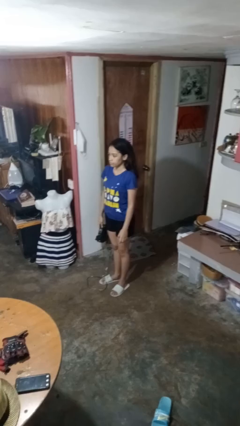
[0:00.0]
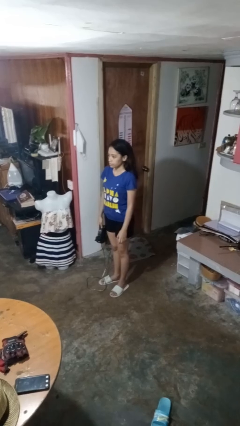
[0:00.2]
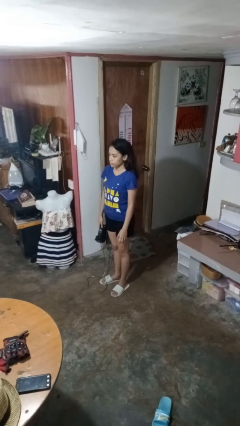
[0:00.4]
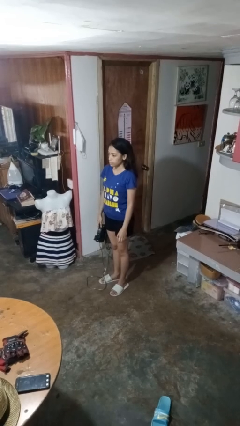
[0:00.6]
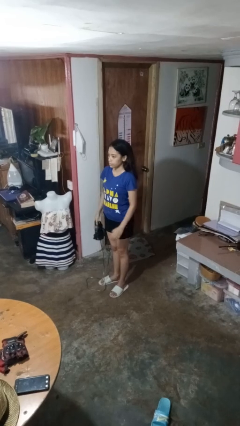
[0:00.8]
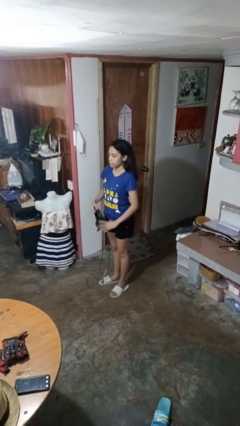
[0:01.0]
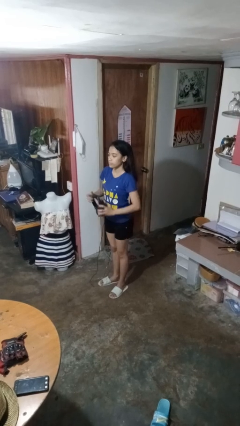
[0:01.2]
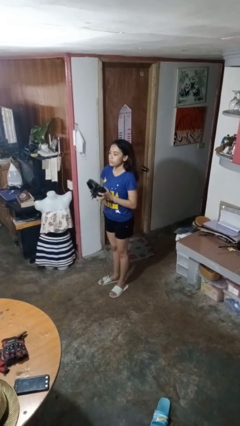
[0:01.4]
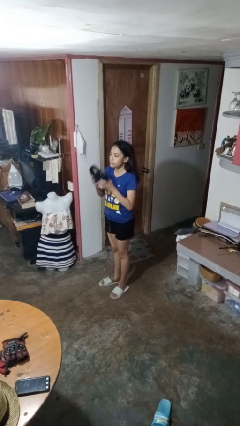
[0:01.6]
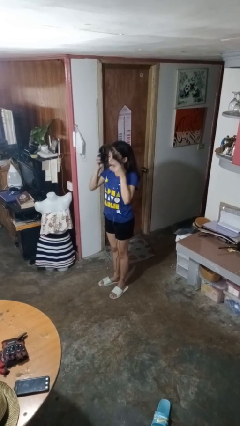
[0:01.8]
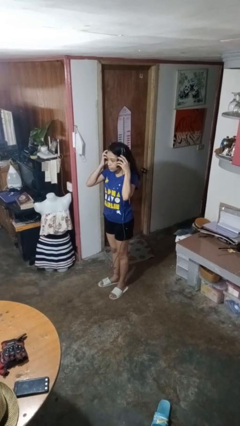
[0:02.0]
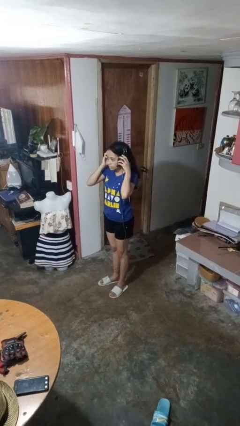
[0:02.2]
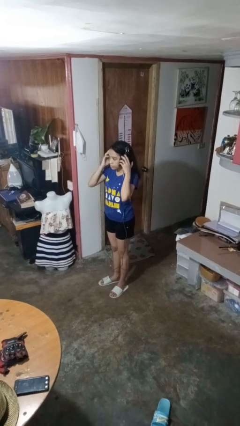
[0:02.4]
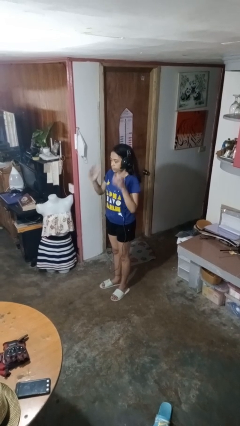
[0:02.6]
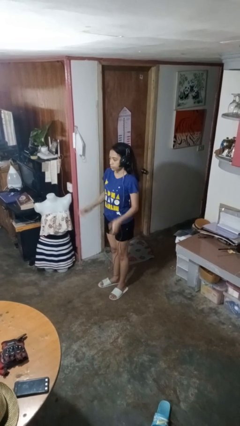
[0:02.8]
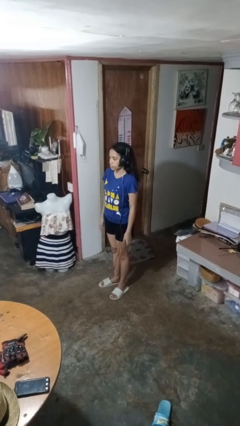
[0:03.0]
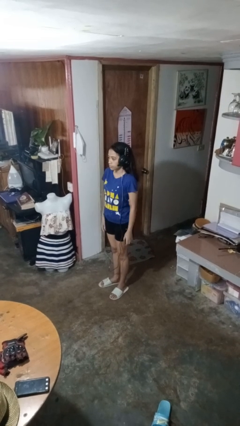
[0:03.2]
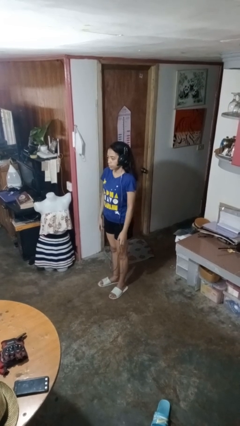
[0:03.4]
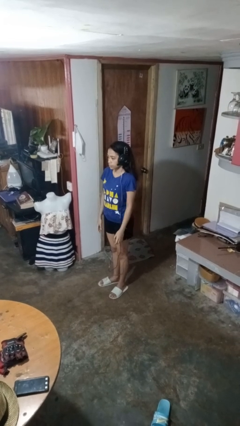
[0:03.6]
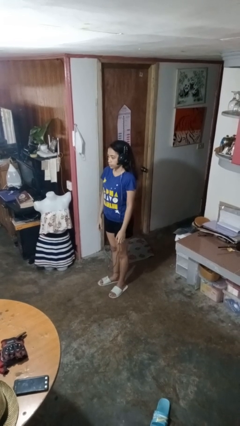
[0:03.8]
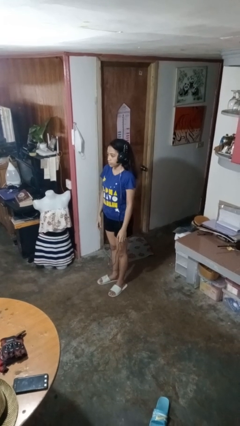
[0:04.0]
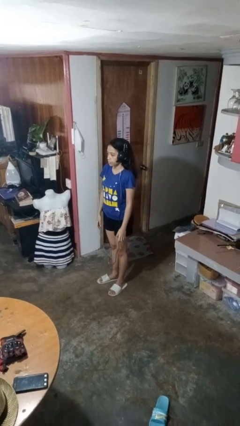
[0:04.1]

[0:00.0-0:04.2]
person puts on headphones

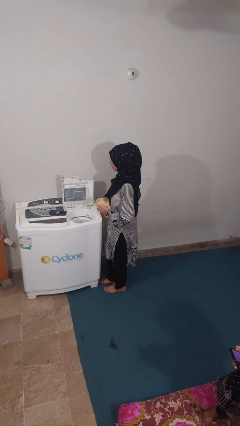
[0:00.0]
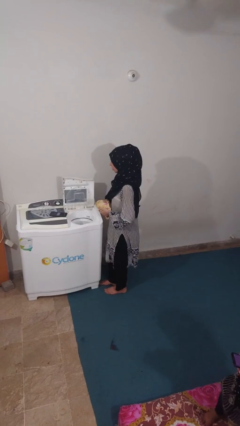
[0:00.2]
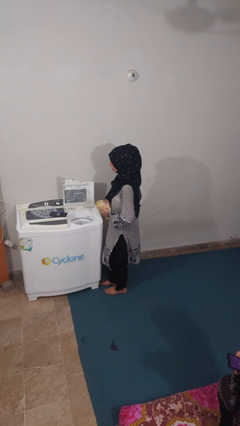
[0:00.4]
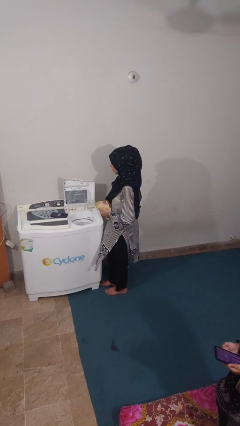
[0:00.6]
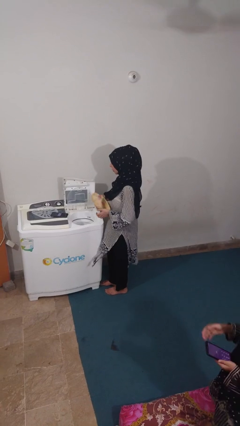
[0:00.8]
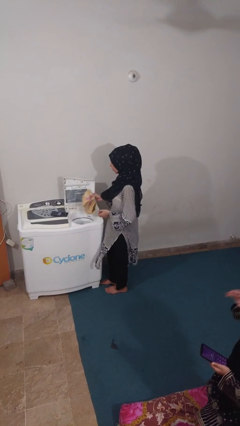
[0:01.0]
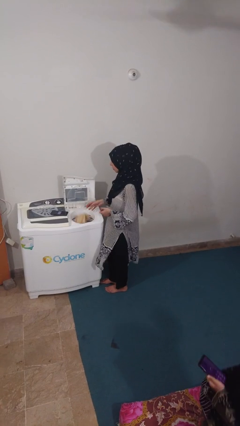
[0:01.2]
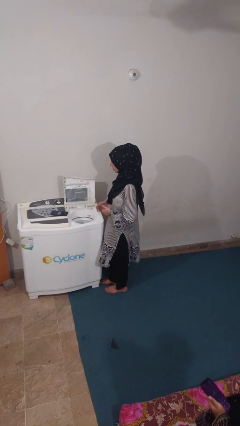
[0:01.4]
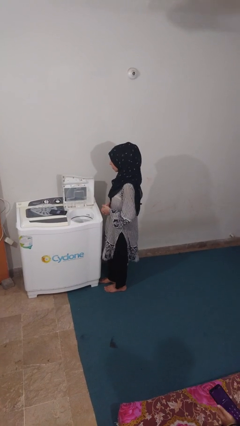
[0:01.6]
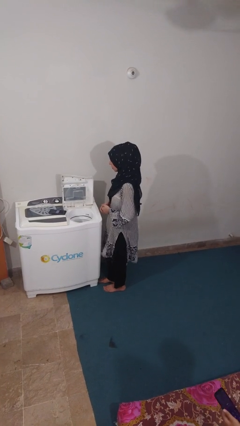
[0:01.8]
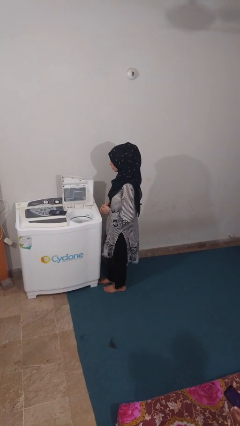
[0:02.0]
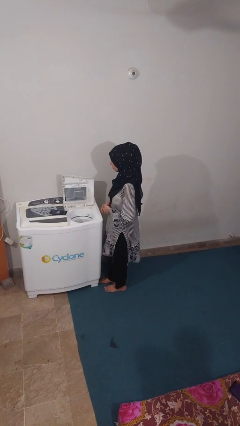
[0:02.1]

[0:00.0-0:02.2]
person loads dryer

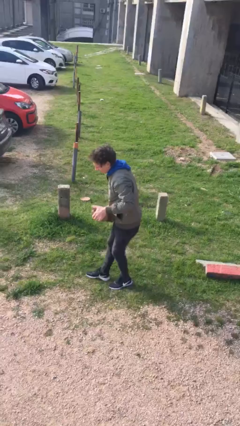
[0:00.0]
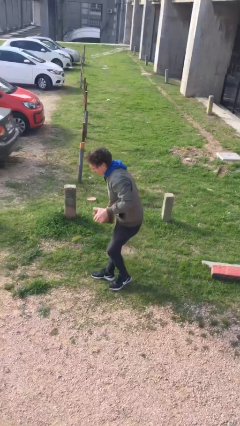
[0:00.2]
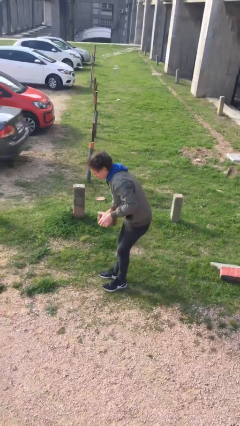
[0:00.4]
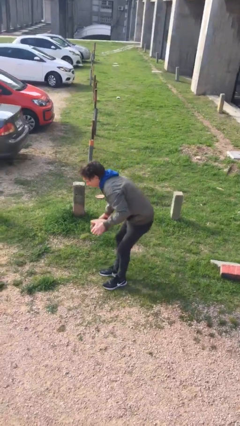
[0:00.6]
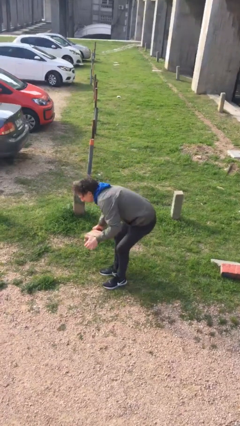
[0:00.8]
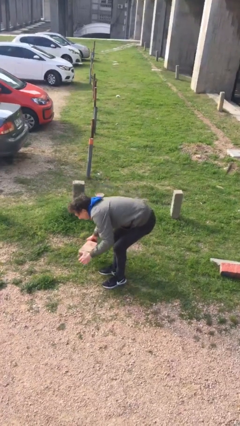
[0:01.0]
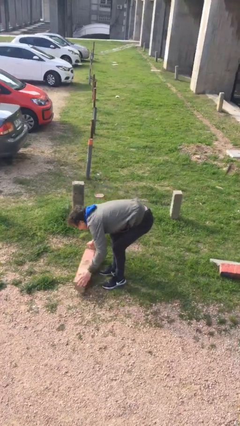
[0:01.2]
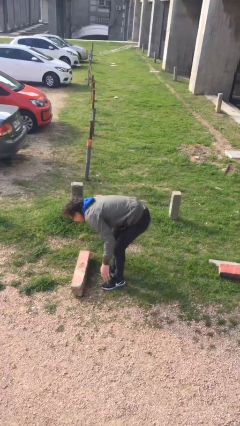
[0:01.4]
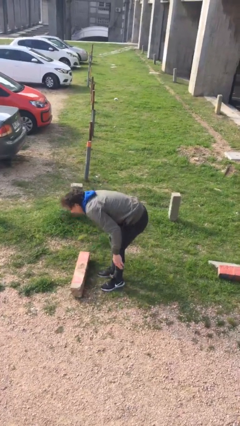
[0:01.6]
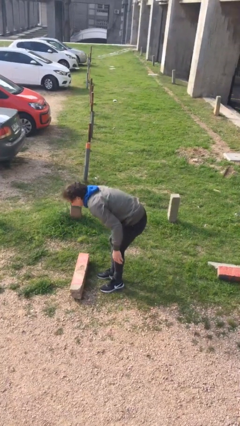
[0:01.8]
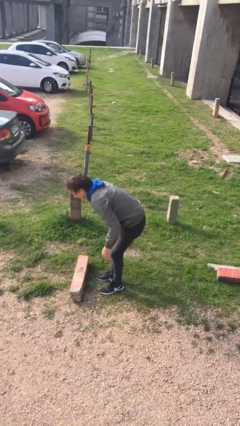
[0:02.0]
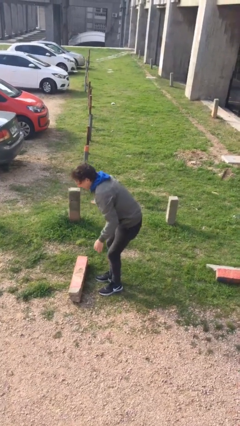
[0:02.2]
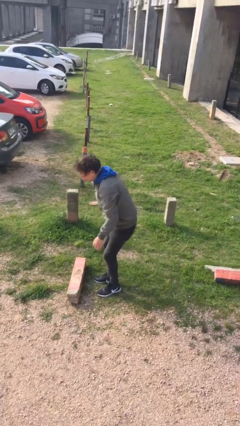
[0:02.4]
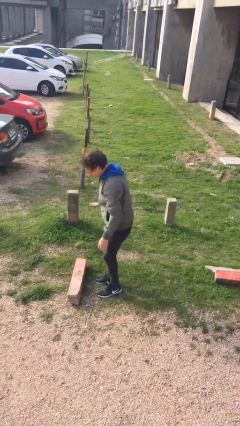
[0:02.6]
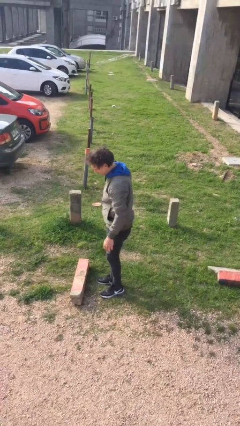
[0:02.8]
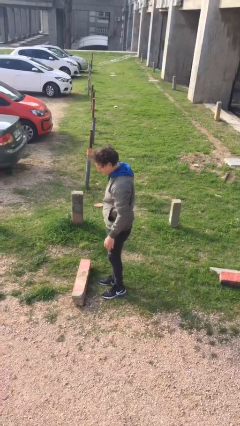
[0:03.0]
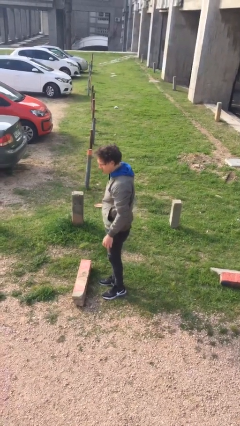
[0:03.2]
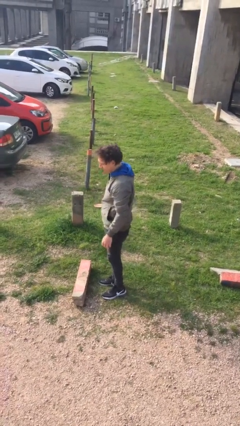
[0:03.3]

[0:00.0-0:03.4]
person puts down object on floor

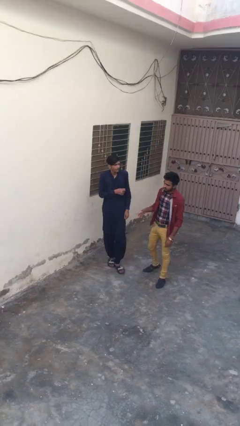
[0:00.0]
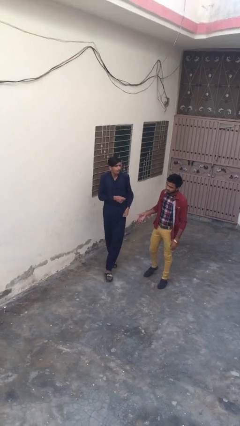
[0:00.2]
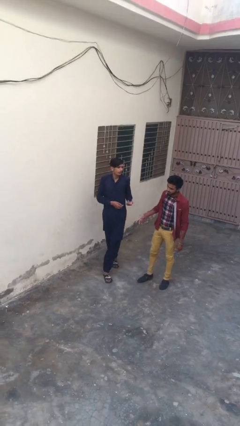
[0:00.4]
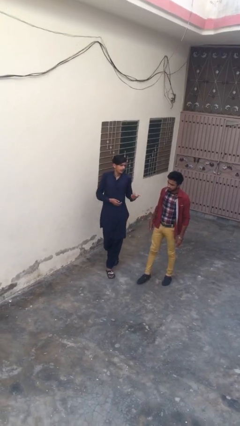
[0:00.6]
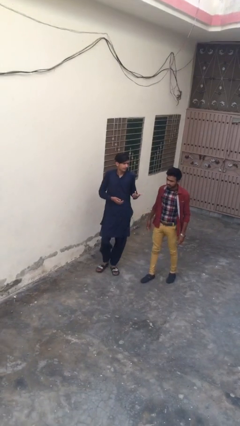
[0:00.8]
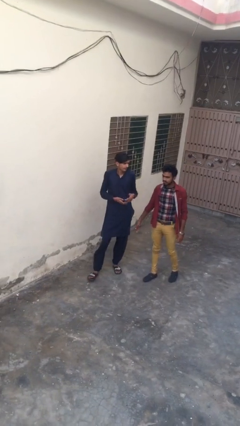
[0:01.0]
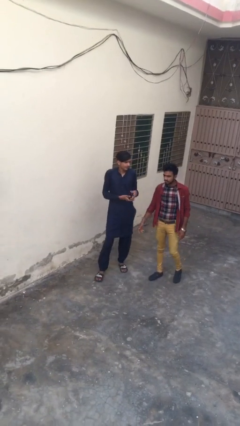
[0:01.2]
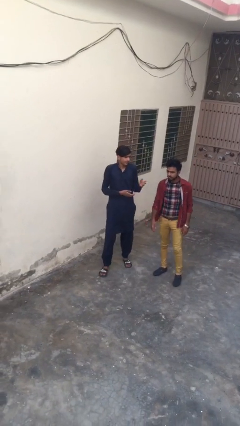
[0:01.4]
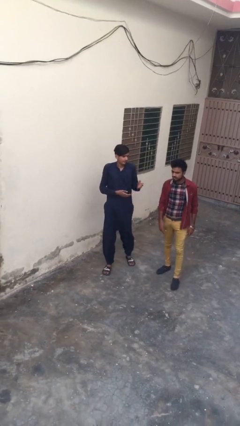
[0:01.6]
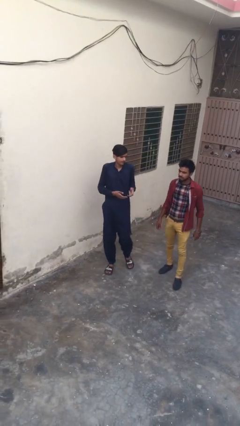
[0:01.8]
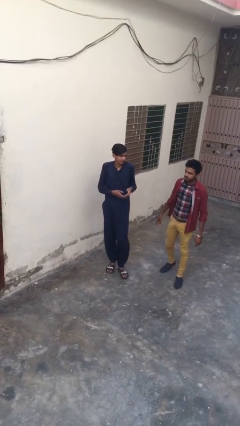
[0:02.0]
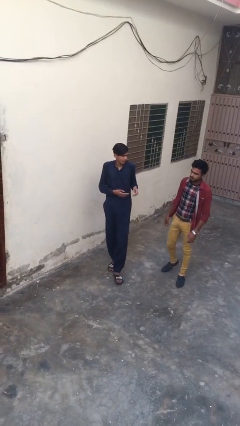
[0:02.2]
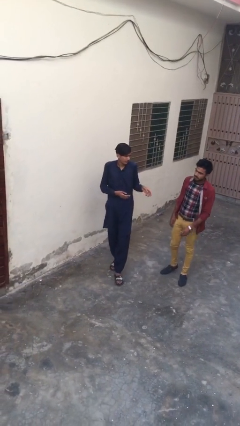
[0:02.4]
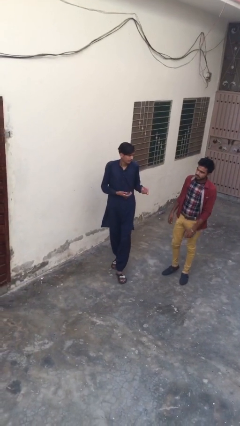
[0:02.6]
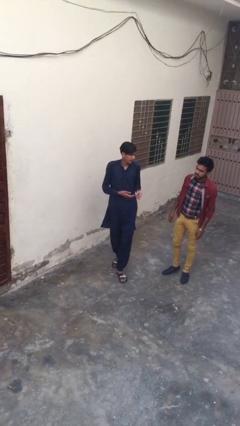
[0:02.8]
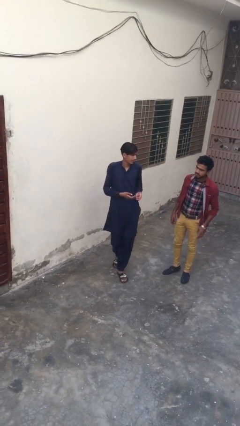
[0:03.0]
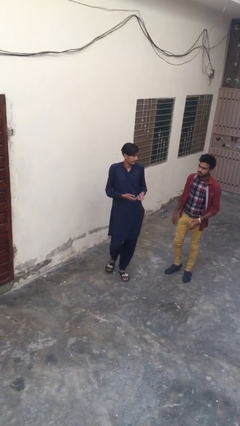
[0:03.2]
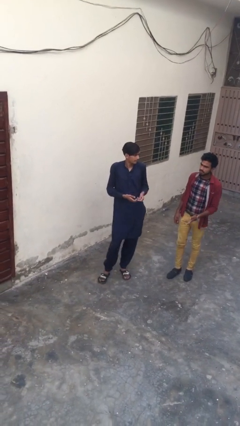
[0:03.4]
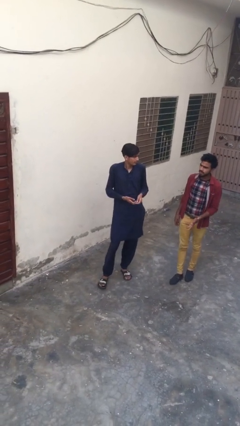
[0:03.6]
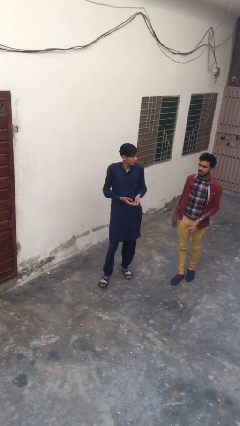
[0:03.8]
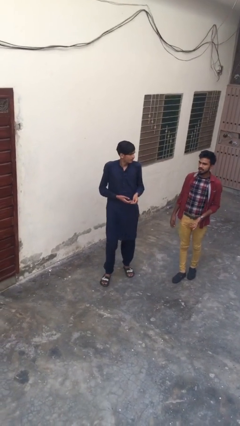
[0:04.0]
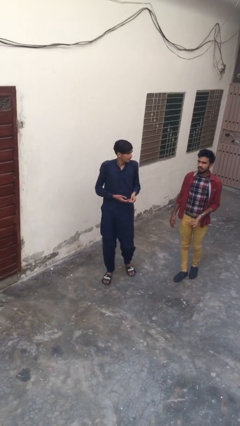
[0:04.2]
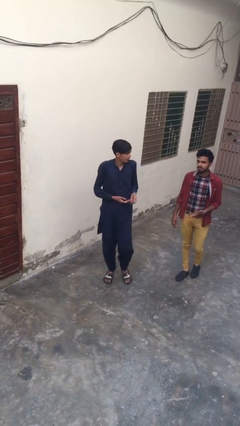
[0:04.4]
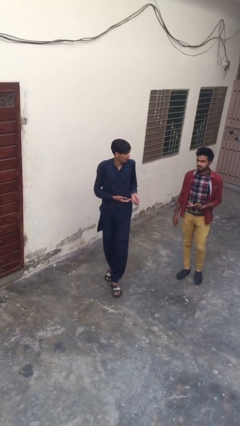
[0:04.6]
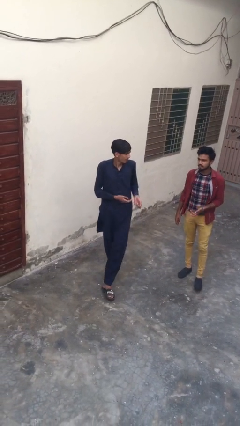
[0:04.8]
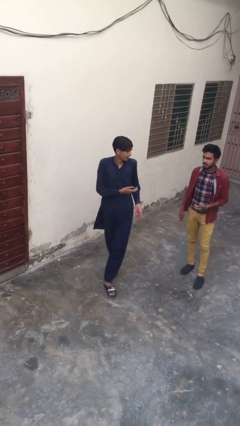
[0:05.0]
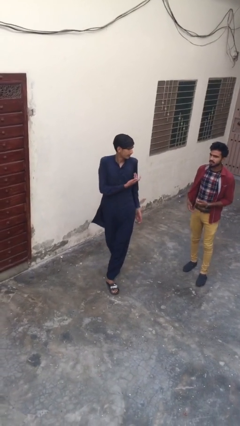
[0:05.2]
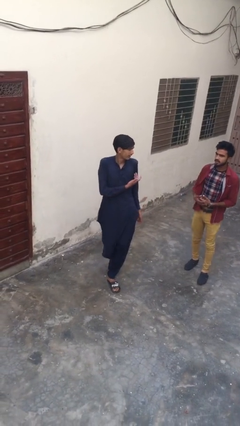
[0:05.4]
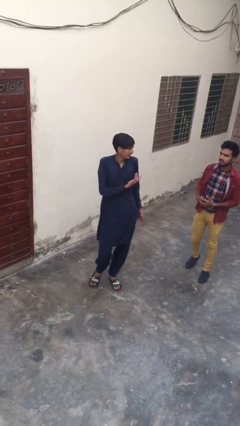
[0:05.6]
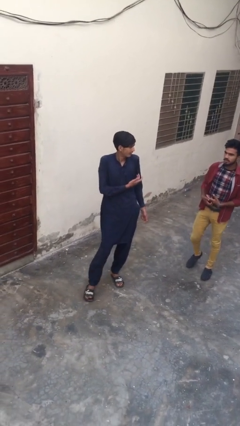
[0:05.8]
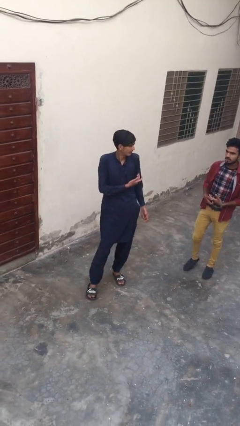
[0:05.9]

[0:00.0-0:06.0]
person talks to person

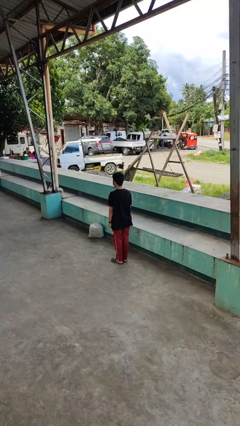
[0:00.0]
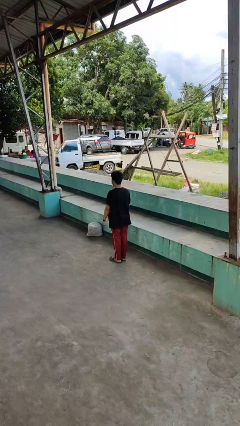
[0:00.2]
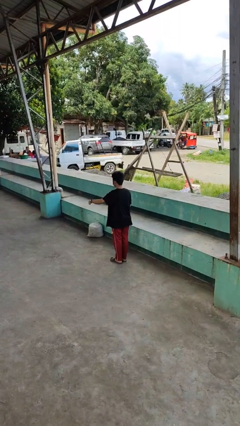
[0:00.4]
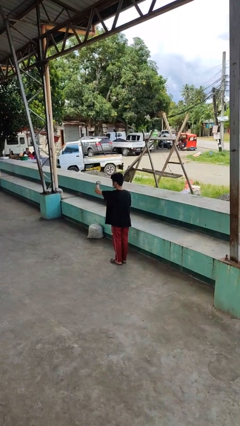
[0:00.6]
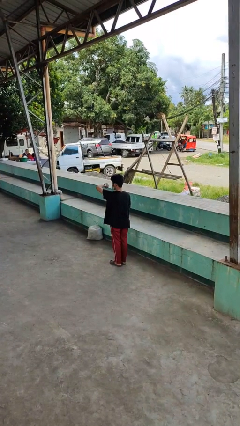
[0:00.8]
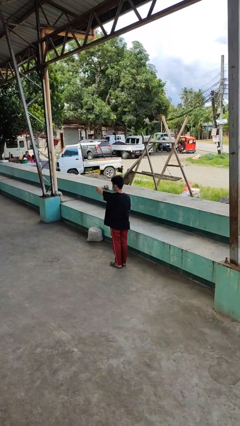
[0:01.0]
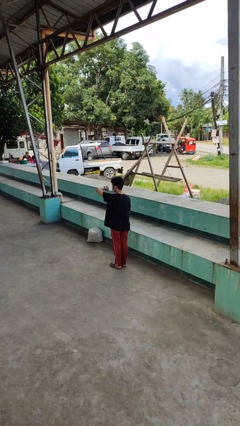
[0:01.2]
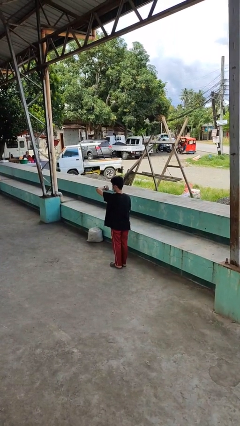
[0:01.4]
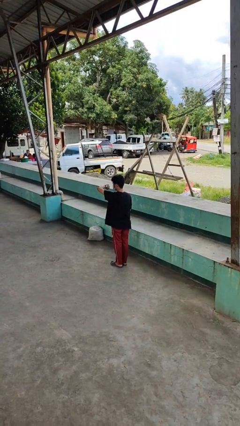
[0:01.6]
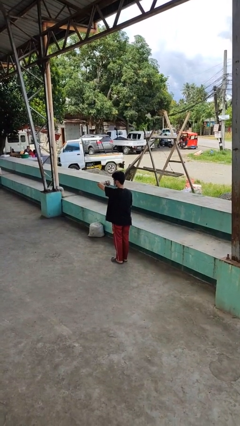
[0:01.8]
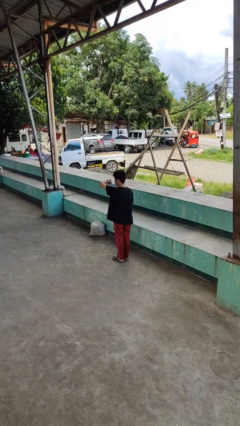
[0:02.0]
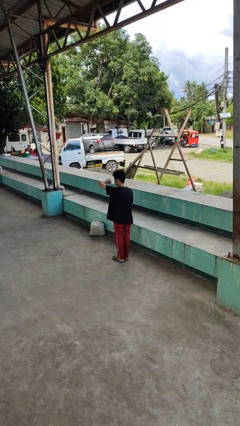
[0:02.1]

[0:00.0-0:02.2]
person looks at wristwatch
